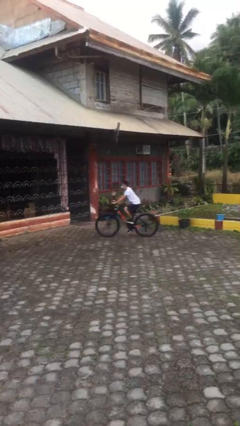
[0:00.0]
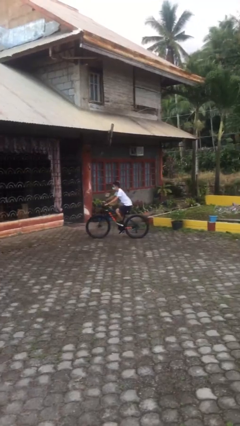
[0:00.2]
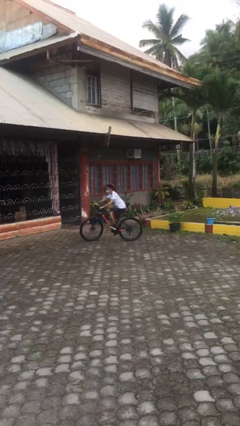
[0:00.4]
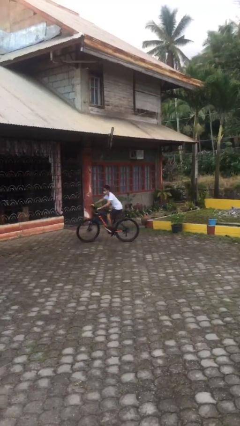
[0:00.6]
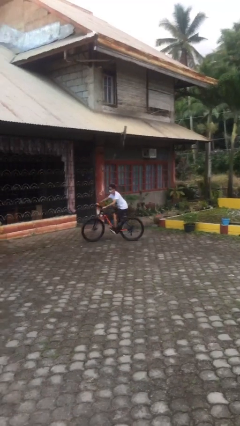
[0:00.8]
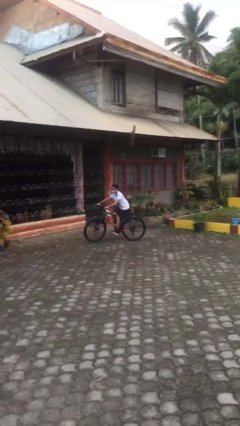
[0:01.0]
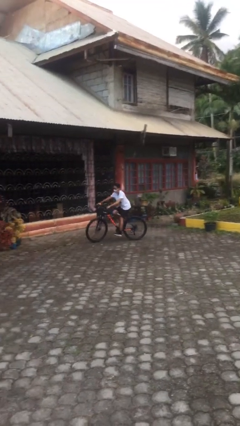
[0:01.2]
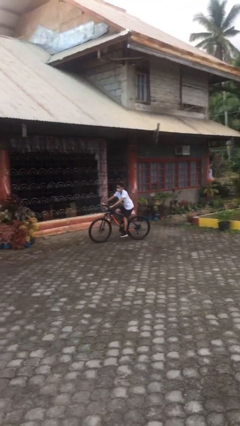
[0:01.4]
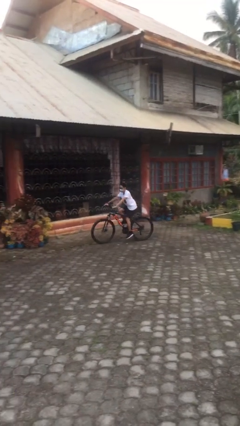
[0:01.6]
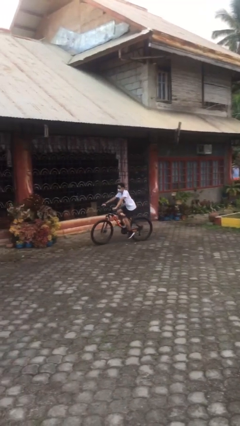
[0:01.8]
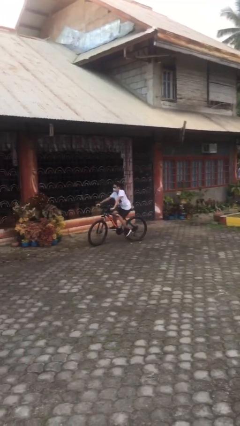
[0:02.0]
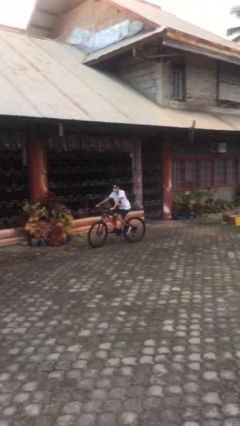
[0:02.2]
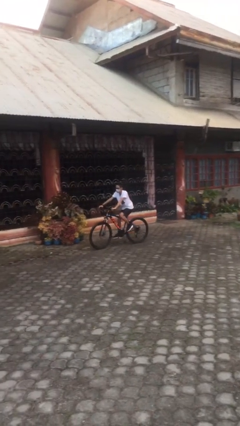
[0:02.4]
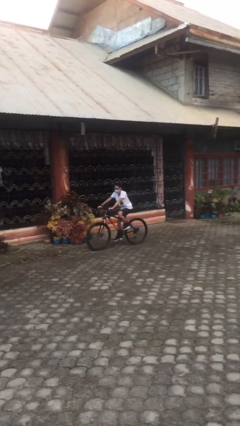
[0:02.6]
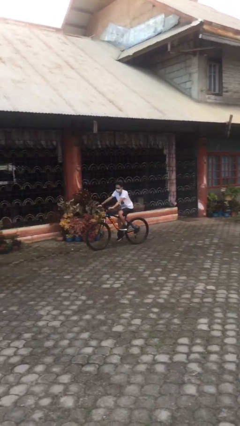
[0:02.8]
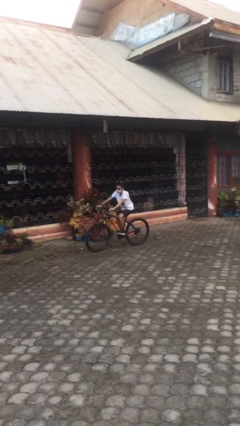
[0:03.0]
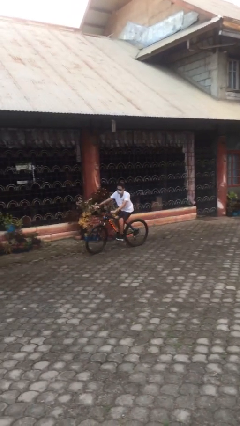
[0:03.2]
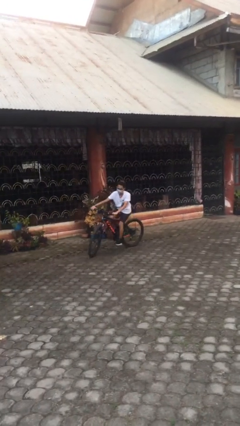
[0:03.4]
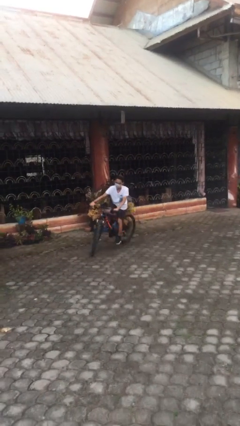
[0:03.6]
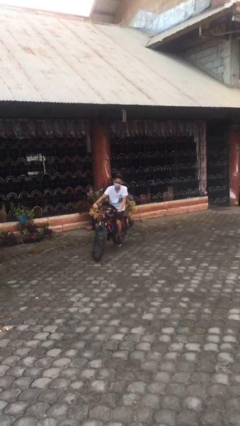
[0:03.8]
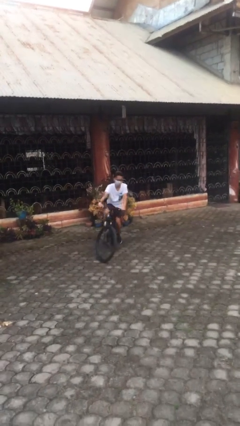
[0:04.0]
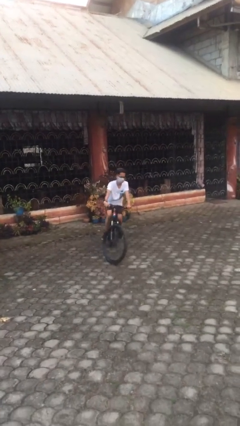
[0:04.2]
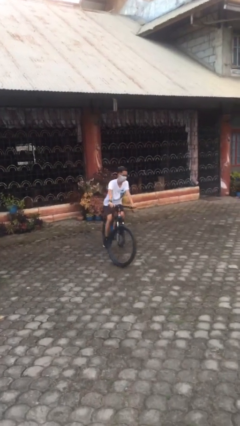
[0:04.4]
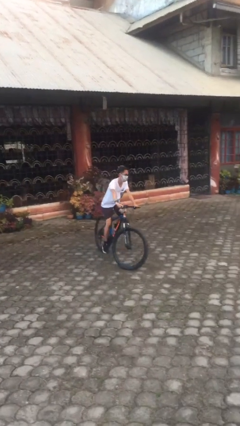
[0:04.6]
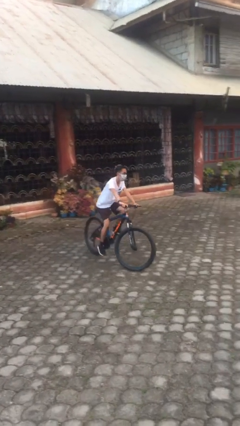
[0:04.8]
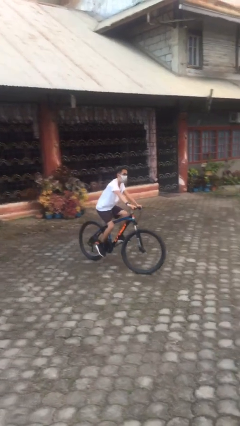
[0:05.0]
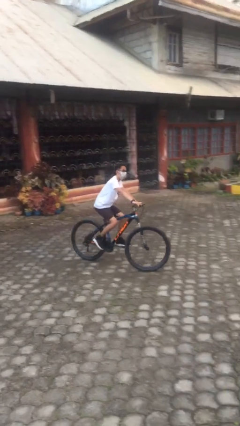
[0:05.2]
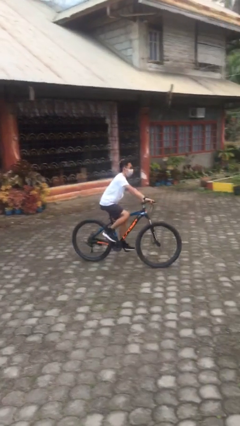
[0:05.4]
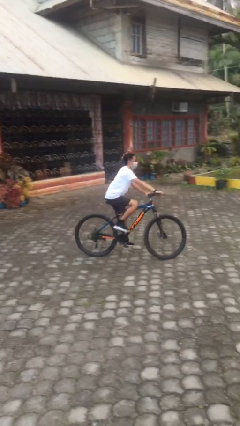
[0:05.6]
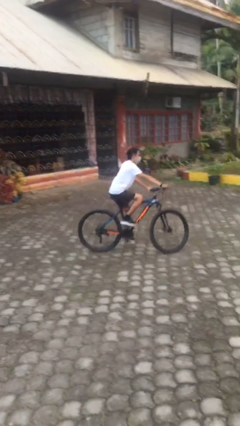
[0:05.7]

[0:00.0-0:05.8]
person rides bicycle

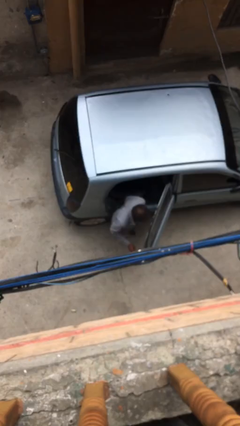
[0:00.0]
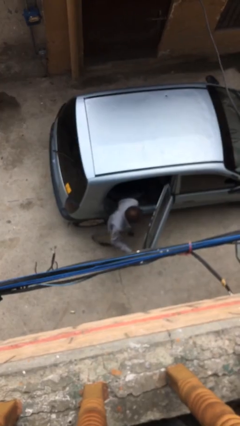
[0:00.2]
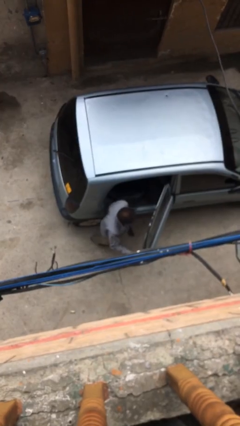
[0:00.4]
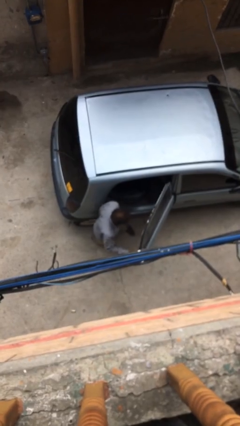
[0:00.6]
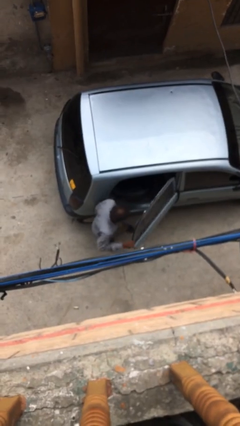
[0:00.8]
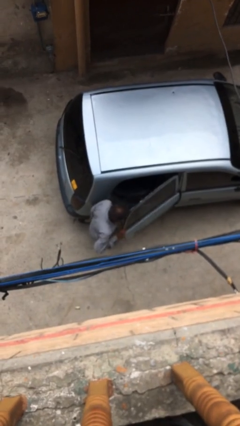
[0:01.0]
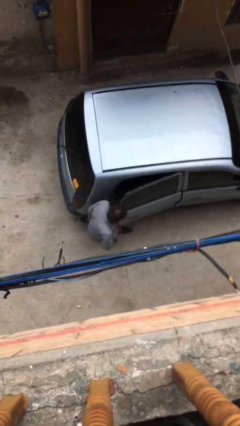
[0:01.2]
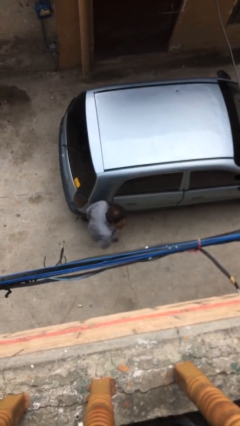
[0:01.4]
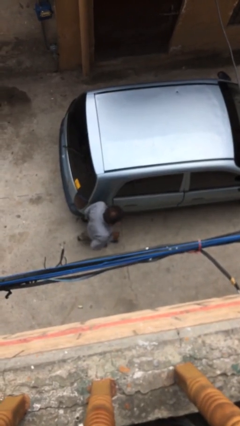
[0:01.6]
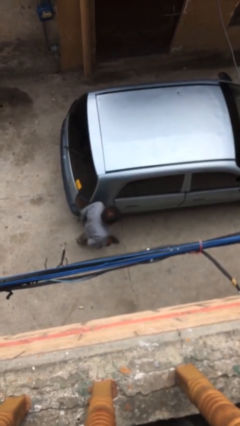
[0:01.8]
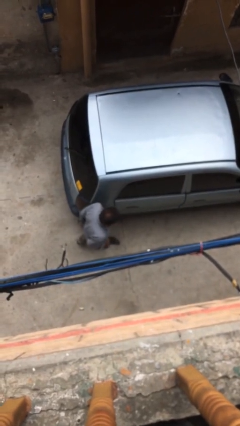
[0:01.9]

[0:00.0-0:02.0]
person closes car door

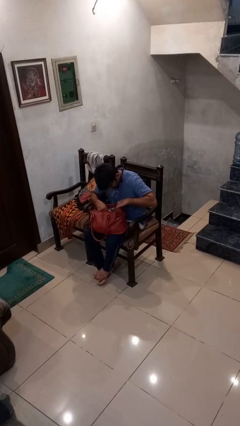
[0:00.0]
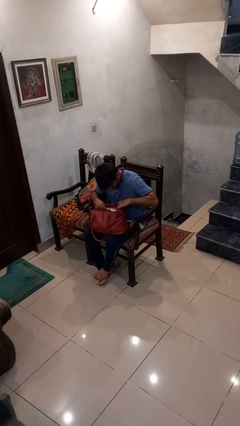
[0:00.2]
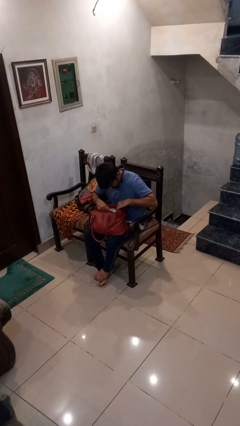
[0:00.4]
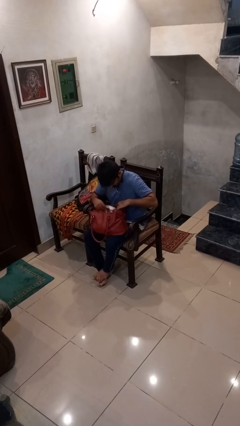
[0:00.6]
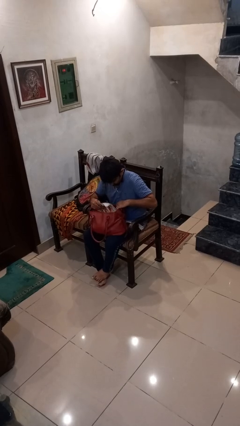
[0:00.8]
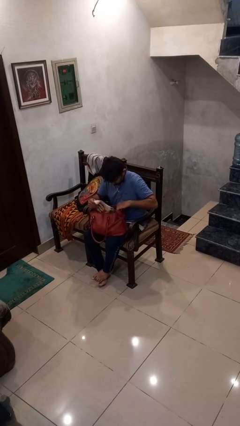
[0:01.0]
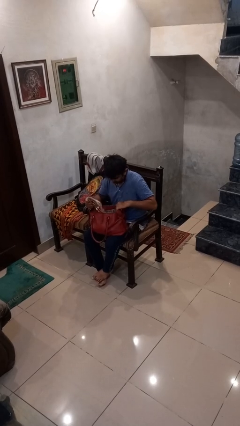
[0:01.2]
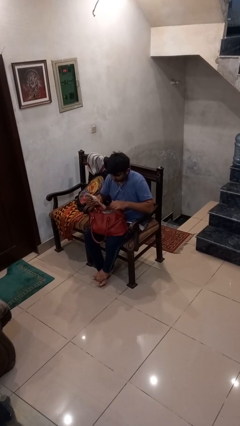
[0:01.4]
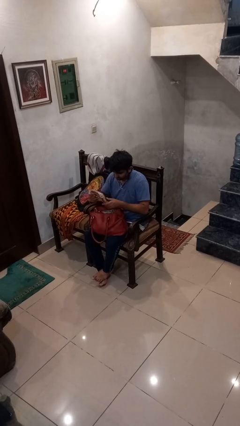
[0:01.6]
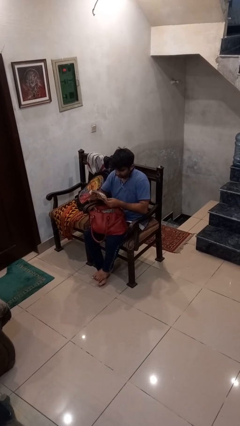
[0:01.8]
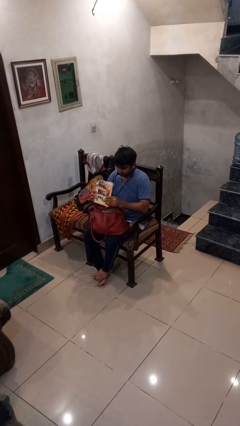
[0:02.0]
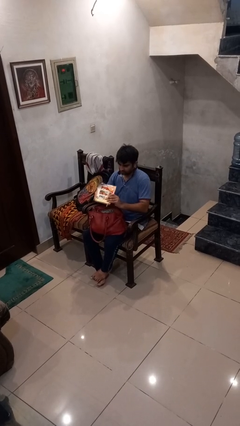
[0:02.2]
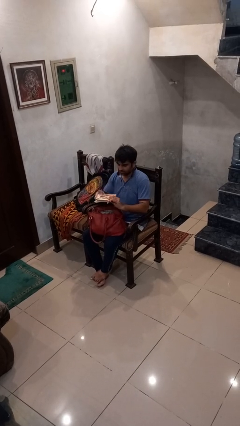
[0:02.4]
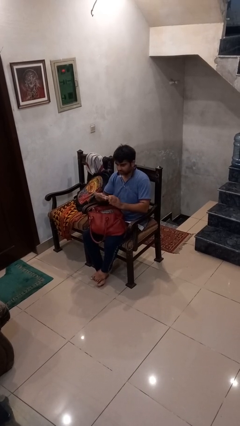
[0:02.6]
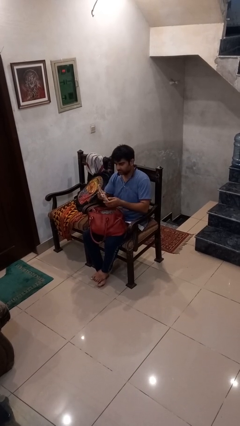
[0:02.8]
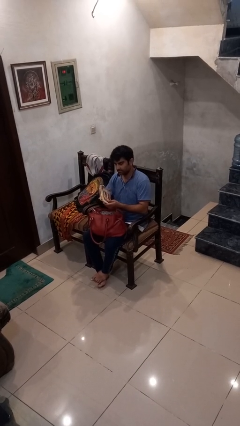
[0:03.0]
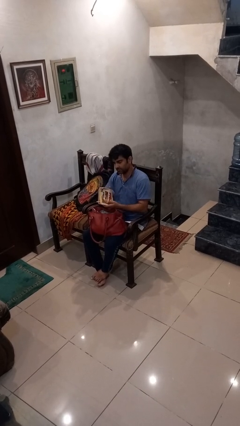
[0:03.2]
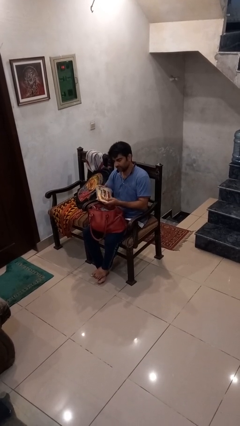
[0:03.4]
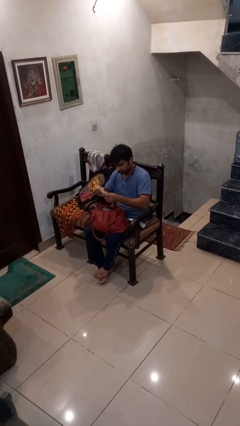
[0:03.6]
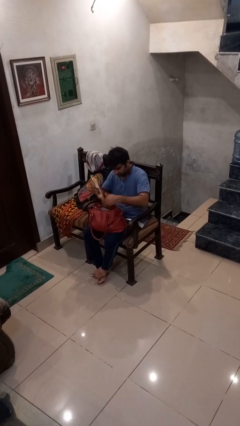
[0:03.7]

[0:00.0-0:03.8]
person takes object from purse

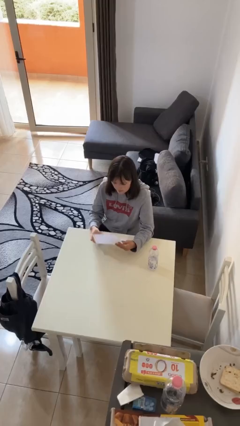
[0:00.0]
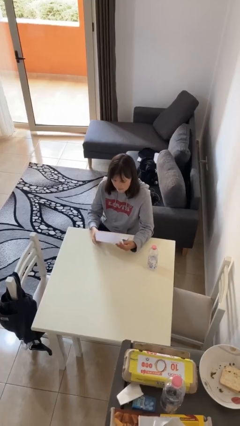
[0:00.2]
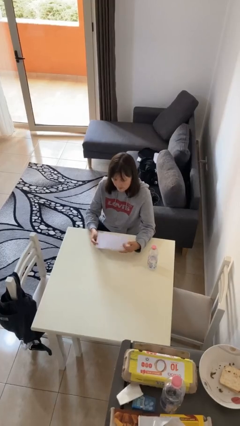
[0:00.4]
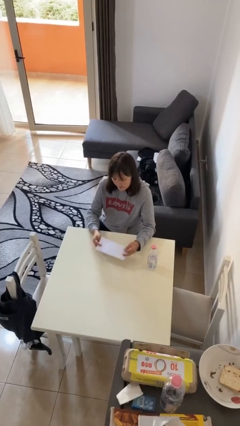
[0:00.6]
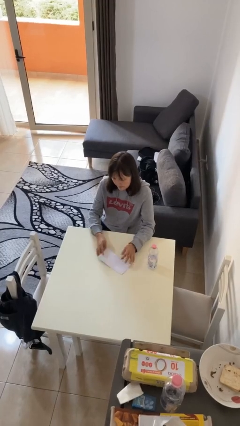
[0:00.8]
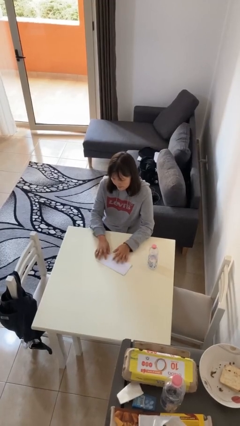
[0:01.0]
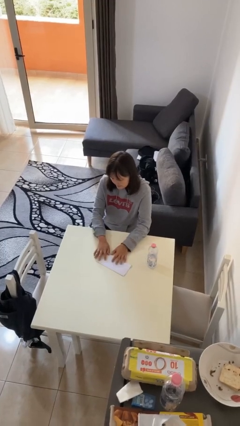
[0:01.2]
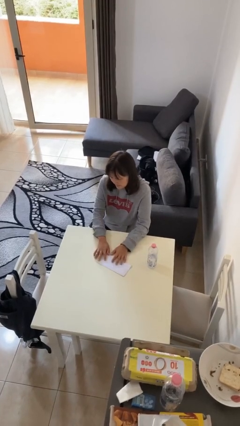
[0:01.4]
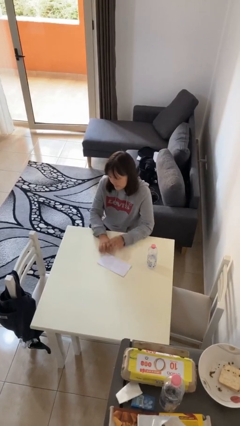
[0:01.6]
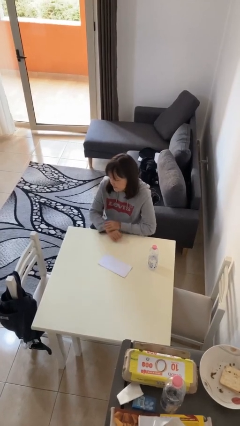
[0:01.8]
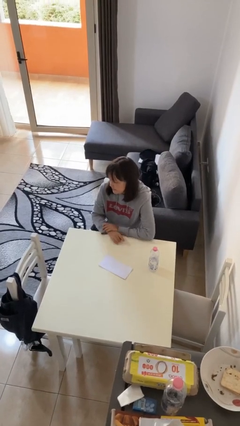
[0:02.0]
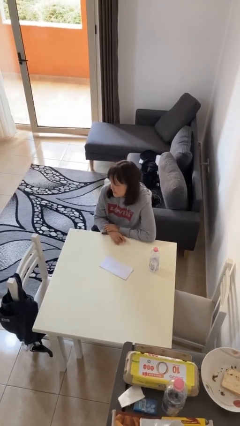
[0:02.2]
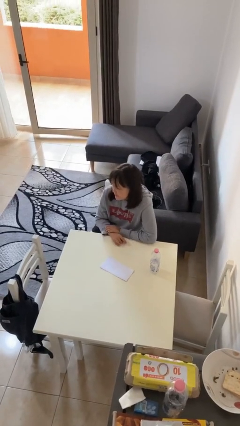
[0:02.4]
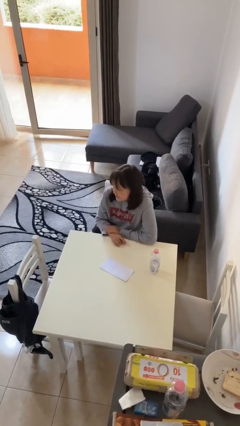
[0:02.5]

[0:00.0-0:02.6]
person puts down object on table

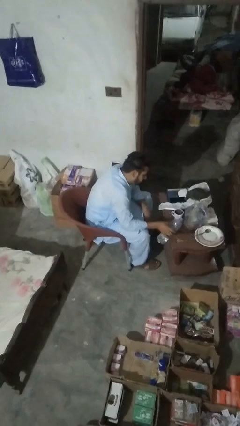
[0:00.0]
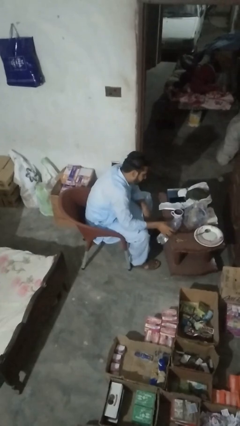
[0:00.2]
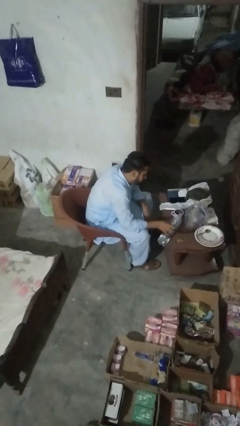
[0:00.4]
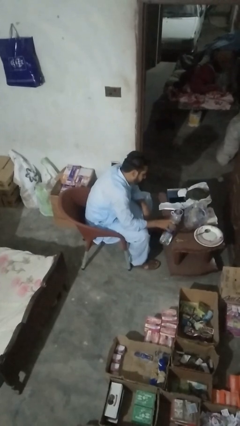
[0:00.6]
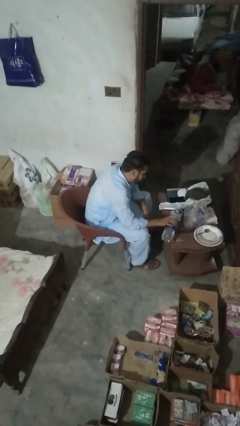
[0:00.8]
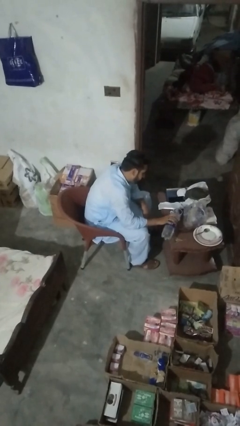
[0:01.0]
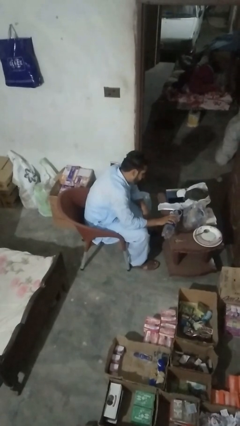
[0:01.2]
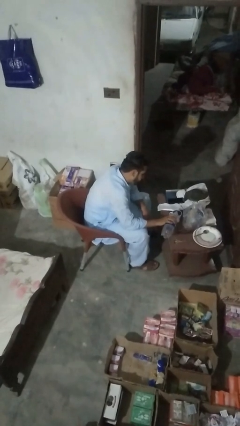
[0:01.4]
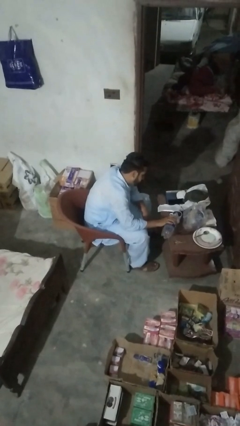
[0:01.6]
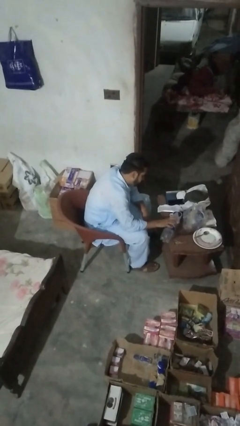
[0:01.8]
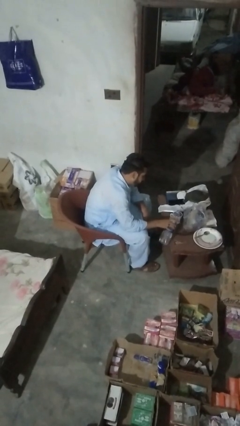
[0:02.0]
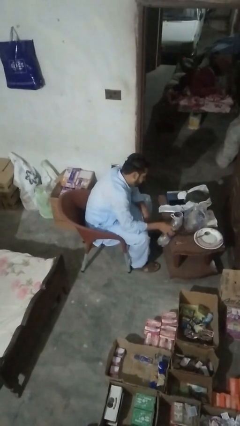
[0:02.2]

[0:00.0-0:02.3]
person pours liquid into cup

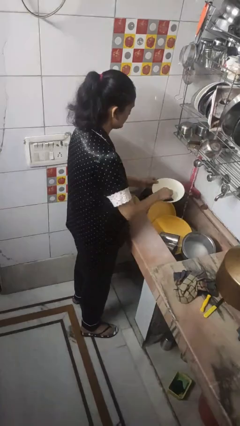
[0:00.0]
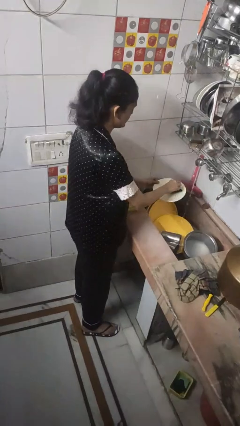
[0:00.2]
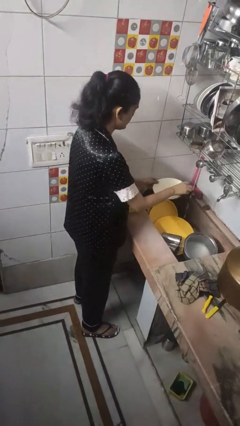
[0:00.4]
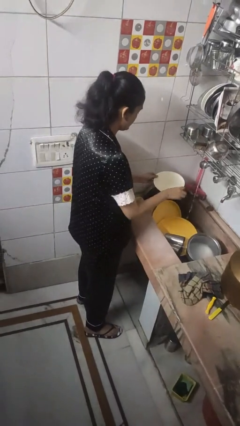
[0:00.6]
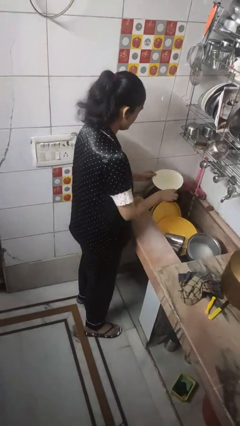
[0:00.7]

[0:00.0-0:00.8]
person washes dish

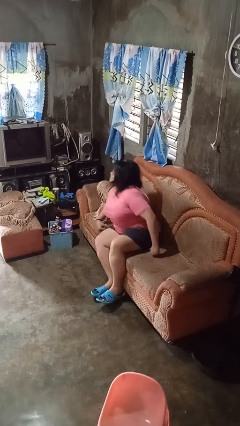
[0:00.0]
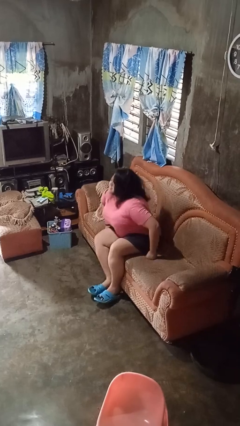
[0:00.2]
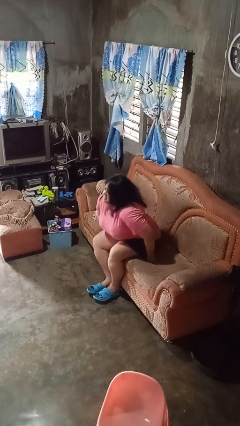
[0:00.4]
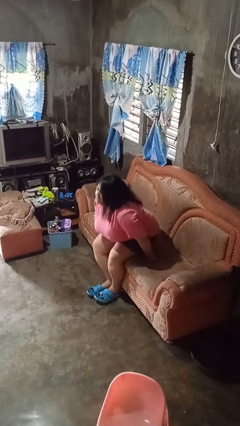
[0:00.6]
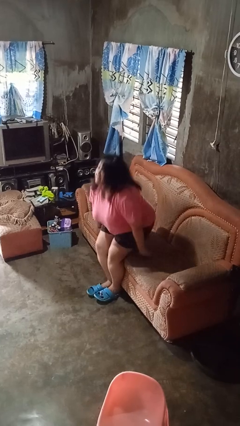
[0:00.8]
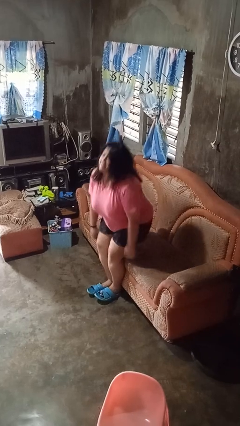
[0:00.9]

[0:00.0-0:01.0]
person stands up
